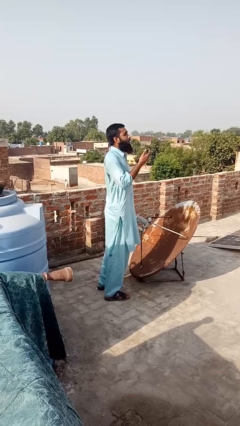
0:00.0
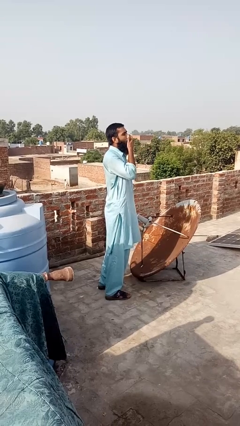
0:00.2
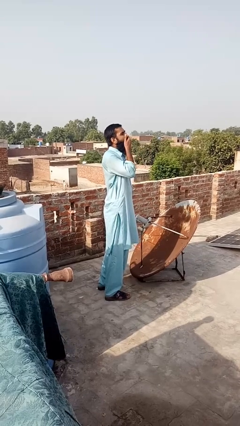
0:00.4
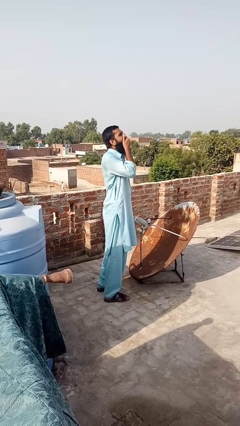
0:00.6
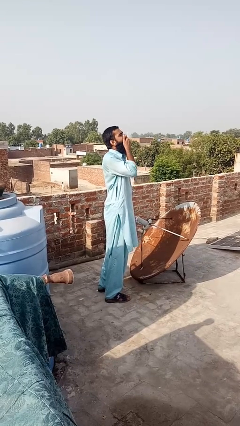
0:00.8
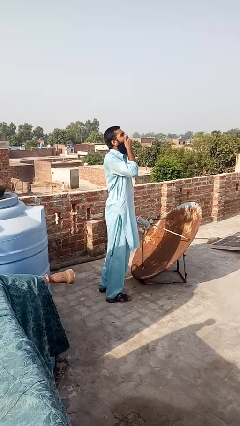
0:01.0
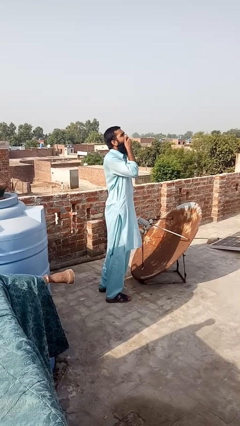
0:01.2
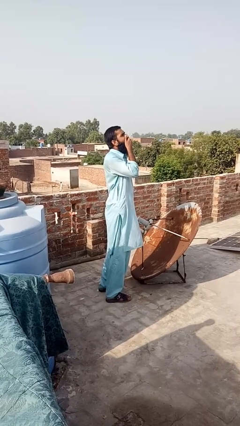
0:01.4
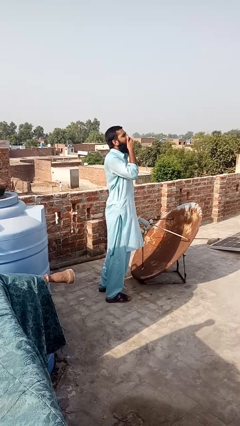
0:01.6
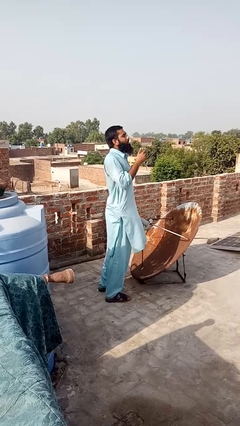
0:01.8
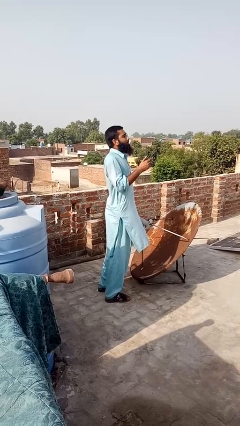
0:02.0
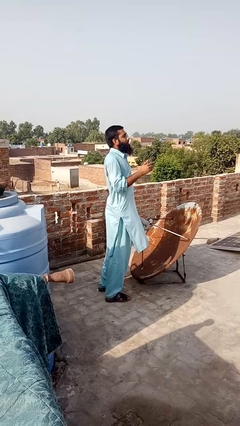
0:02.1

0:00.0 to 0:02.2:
person covers face with hands

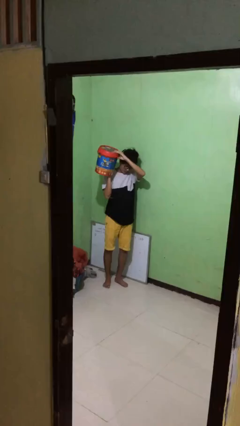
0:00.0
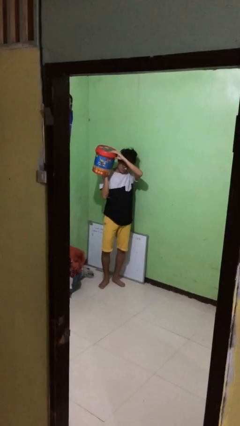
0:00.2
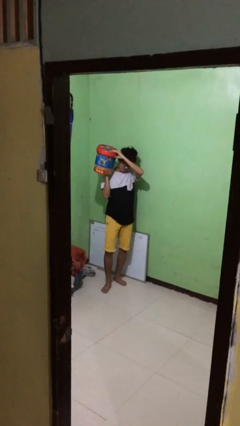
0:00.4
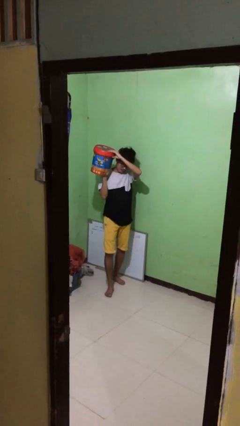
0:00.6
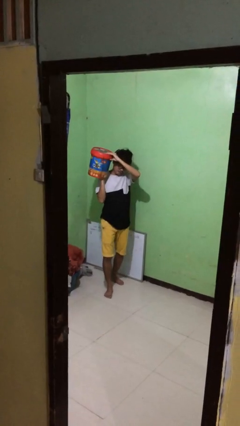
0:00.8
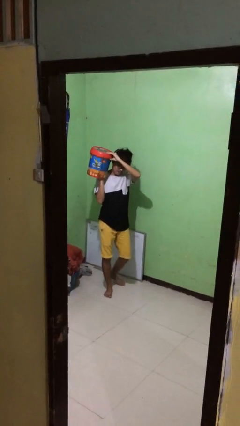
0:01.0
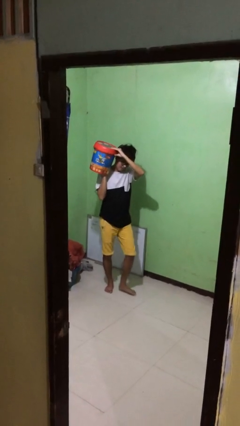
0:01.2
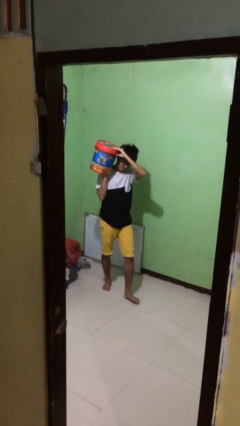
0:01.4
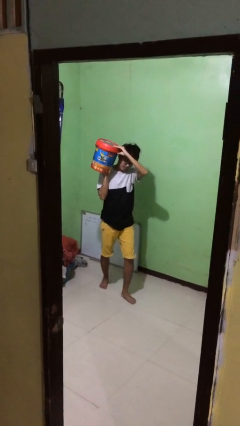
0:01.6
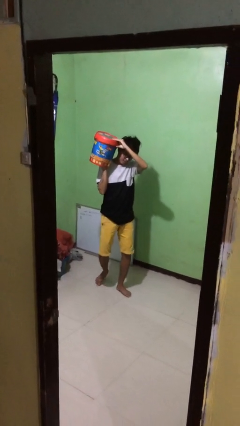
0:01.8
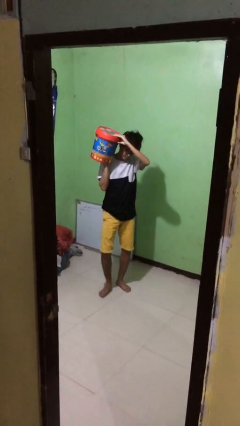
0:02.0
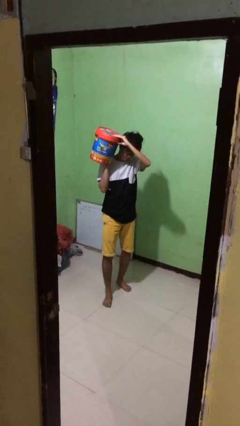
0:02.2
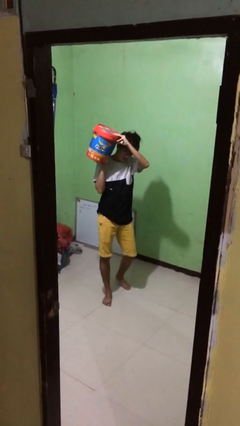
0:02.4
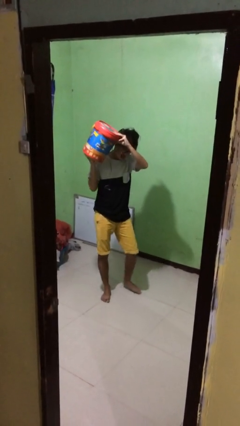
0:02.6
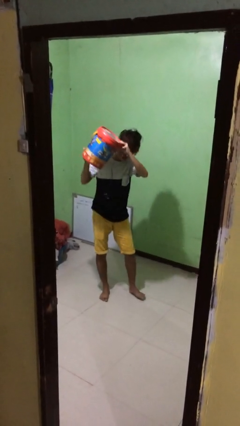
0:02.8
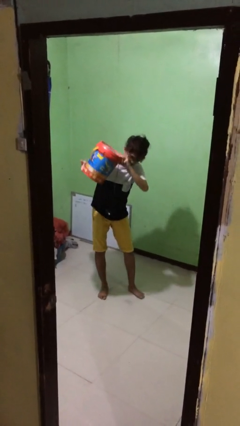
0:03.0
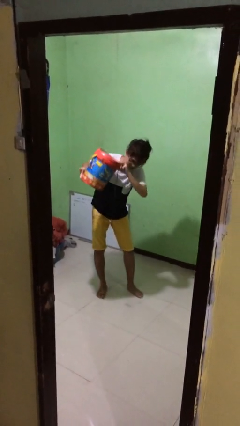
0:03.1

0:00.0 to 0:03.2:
person carries heavy object

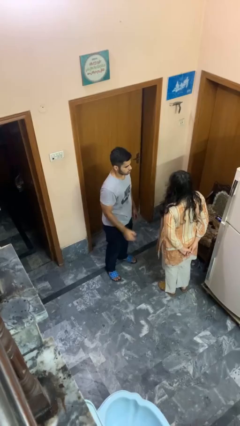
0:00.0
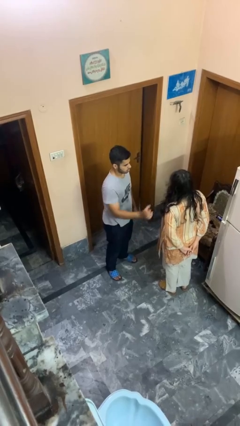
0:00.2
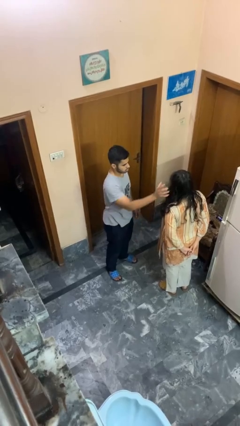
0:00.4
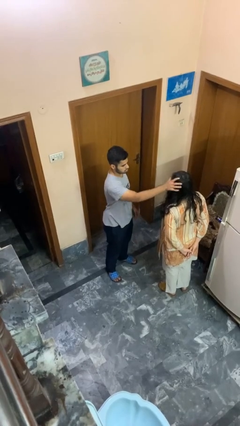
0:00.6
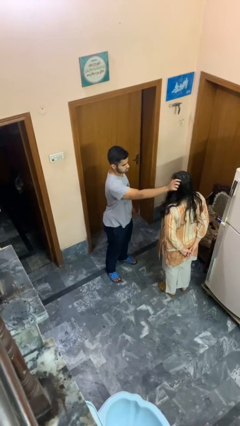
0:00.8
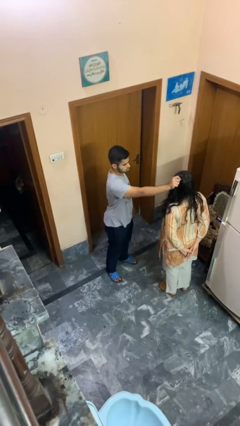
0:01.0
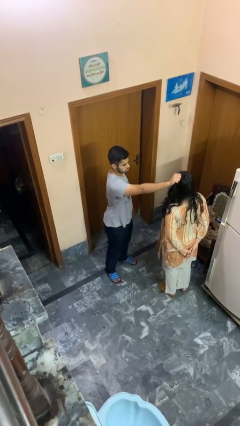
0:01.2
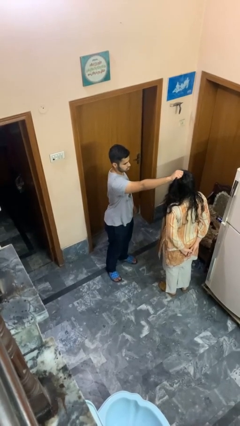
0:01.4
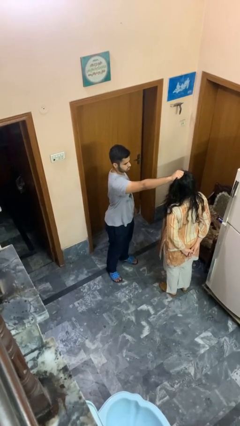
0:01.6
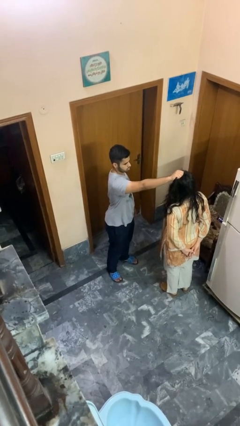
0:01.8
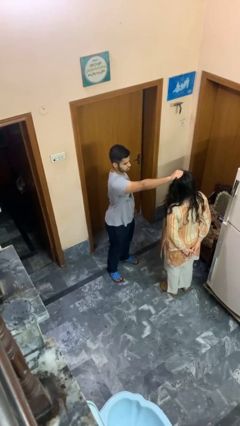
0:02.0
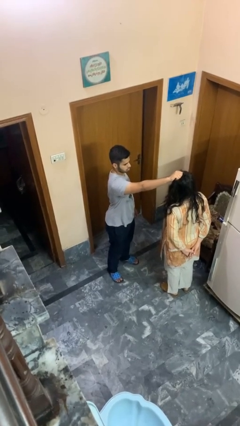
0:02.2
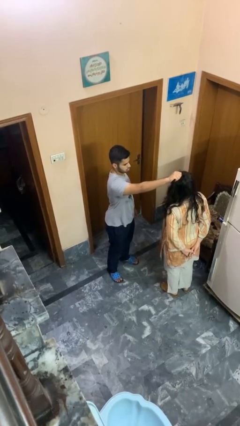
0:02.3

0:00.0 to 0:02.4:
person grabs person by hair

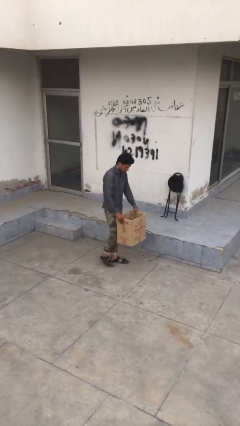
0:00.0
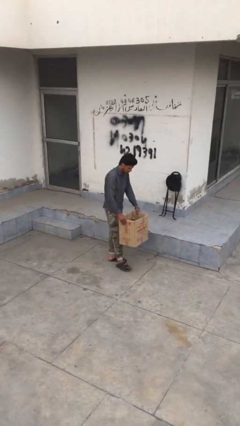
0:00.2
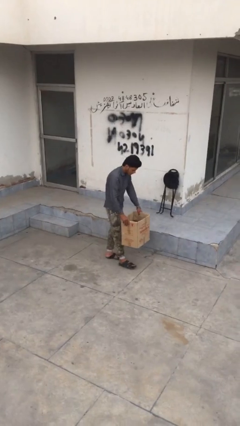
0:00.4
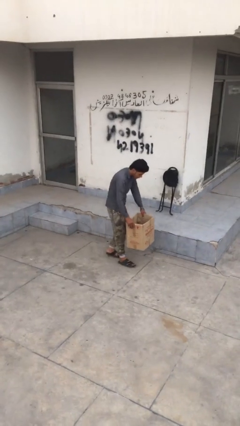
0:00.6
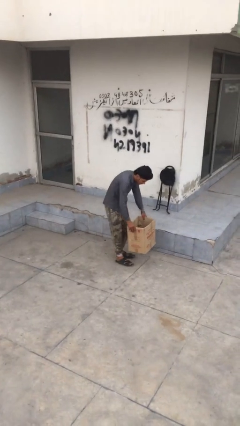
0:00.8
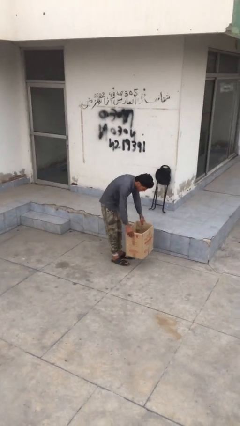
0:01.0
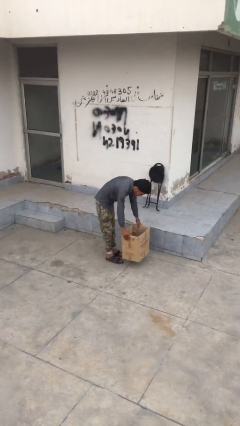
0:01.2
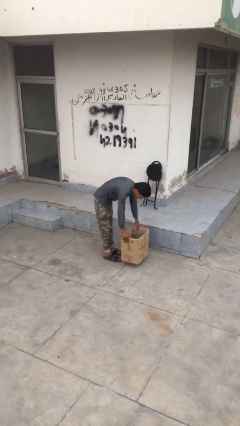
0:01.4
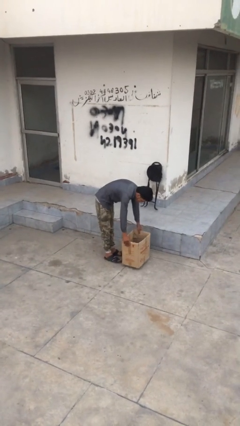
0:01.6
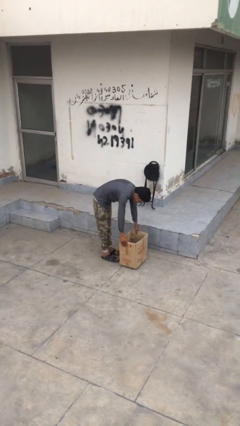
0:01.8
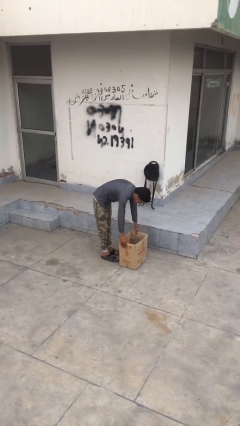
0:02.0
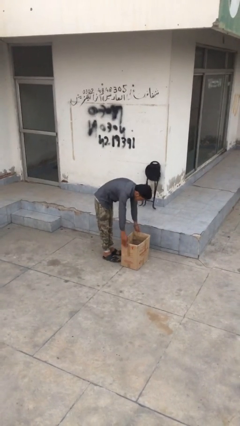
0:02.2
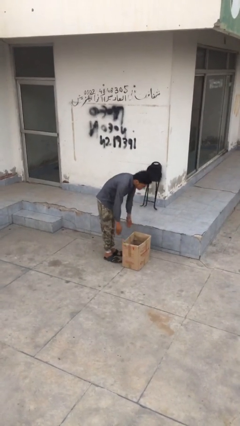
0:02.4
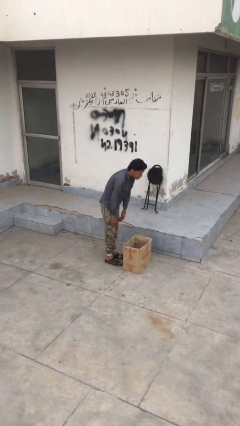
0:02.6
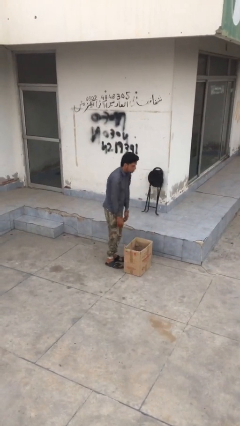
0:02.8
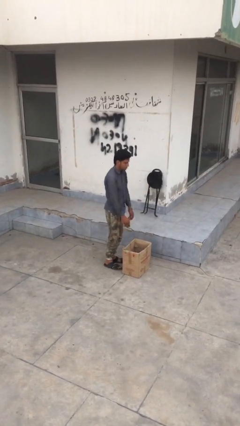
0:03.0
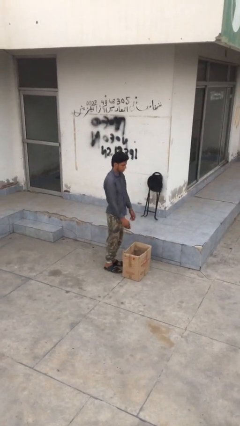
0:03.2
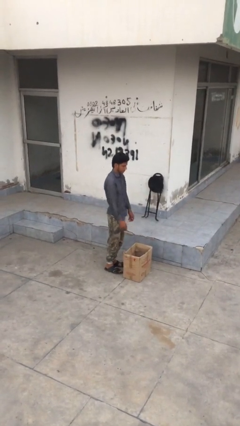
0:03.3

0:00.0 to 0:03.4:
person puts down object on floor

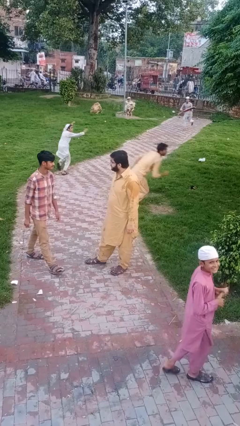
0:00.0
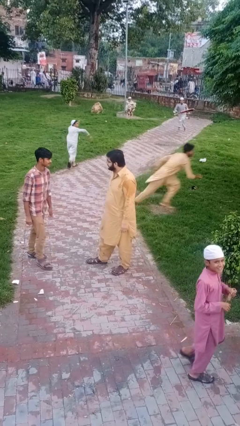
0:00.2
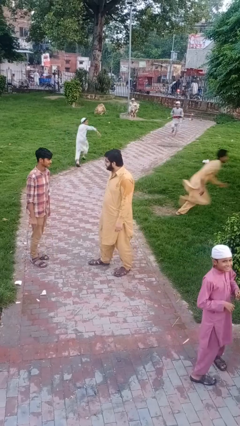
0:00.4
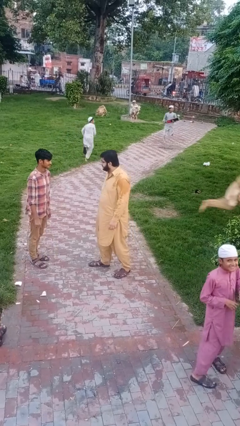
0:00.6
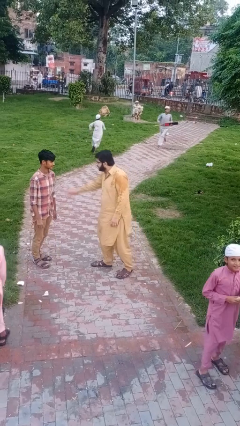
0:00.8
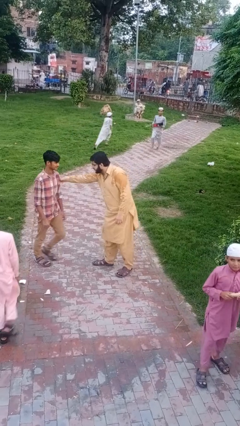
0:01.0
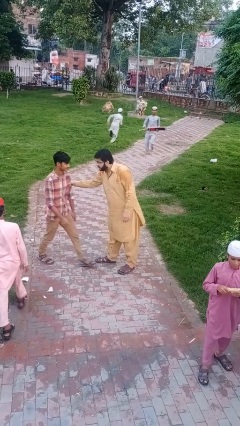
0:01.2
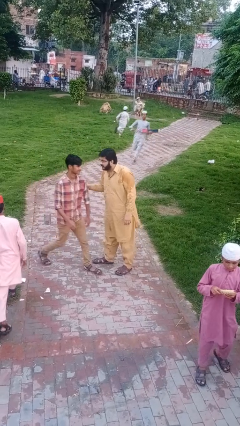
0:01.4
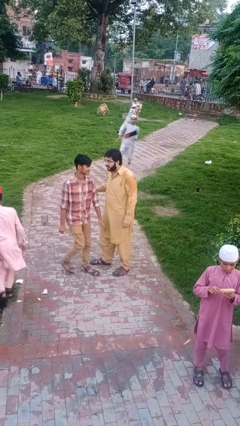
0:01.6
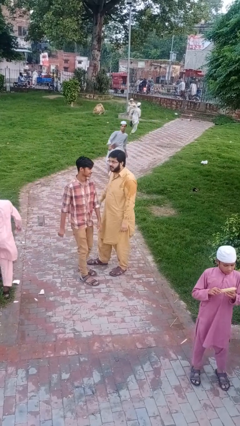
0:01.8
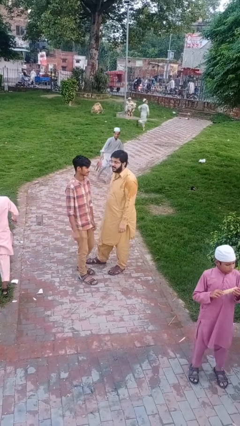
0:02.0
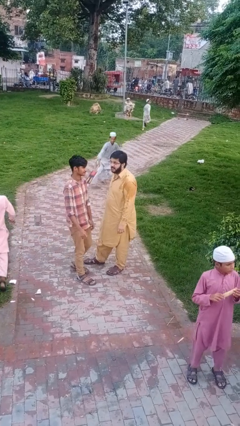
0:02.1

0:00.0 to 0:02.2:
person grabs person by bicep

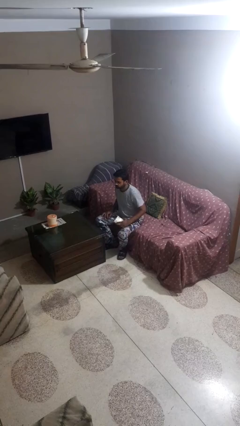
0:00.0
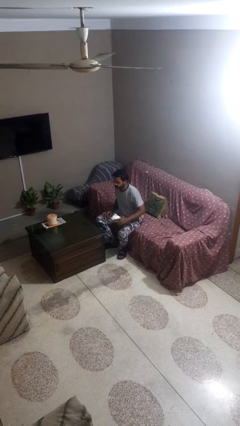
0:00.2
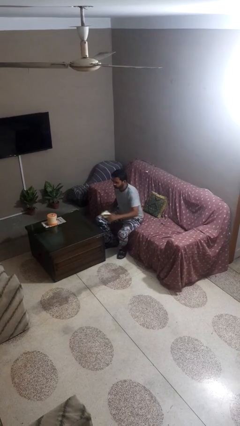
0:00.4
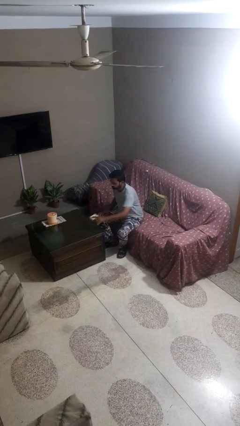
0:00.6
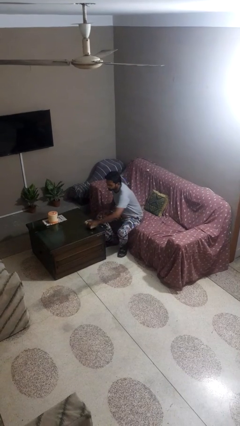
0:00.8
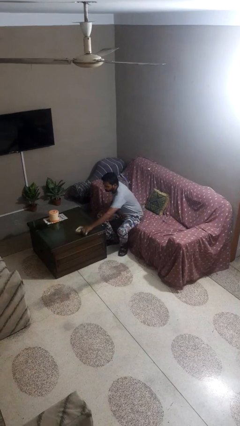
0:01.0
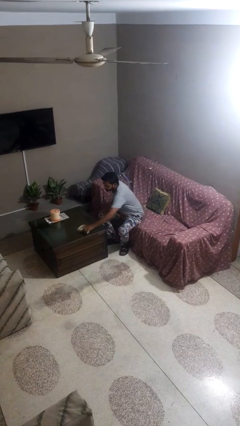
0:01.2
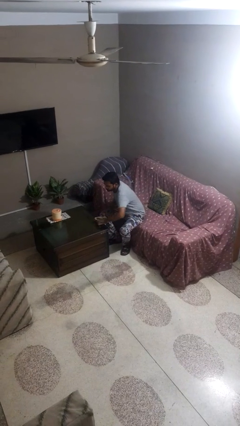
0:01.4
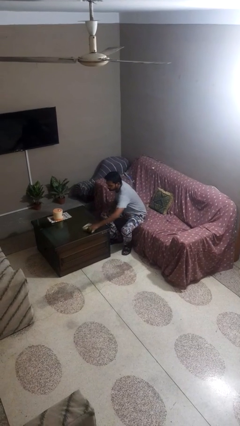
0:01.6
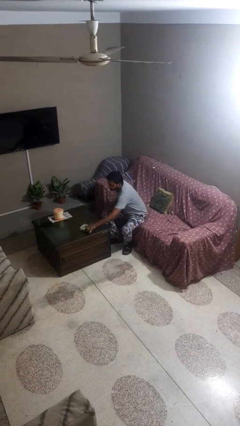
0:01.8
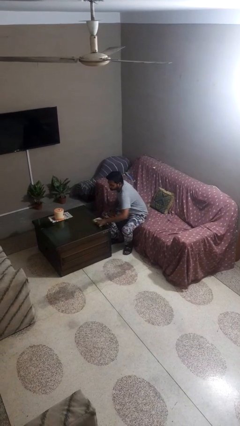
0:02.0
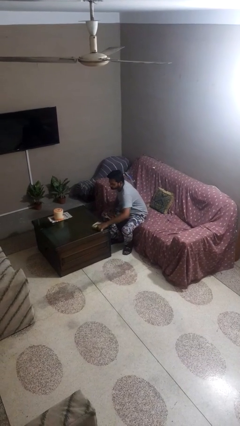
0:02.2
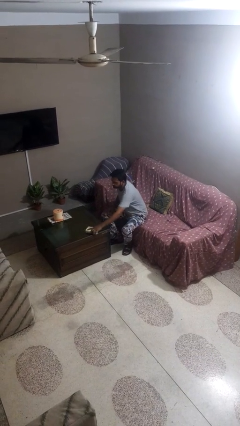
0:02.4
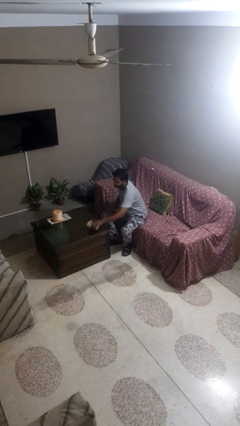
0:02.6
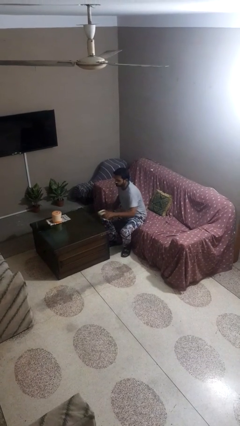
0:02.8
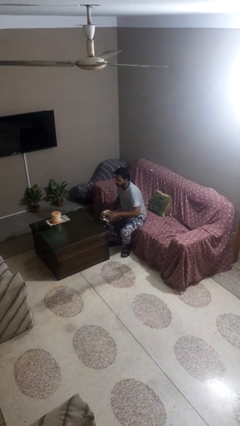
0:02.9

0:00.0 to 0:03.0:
person dusts furniture

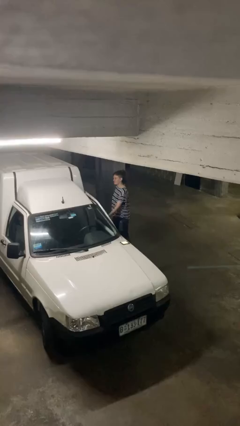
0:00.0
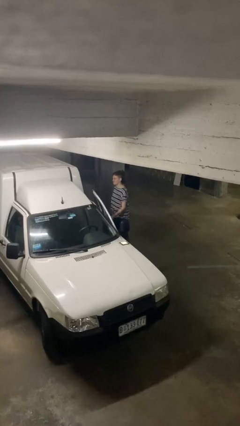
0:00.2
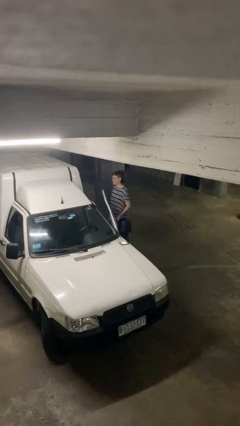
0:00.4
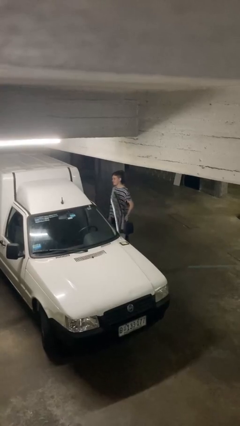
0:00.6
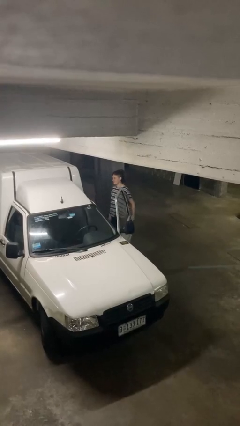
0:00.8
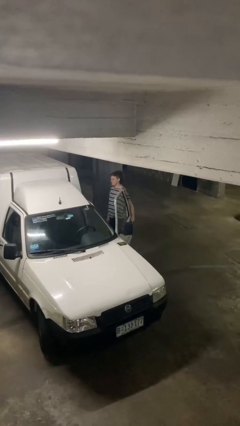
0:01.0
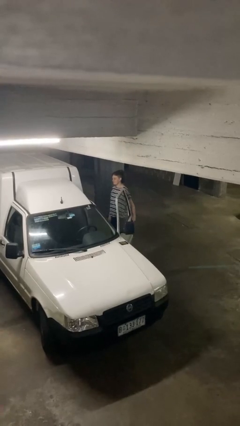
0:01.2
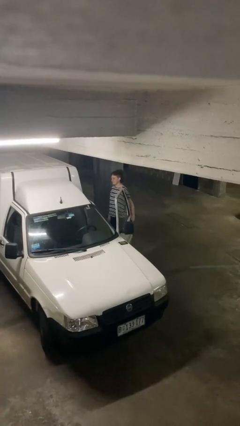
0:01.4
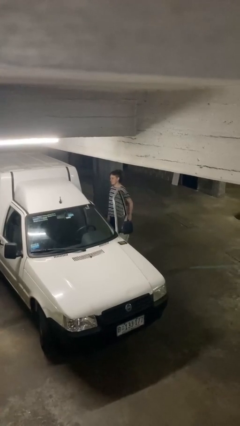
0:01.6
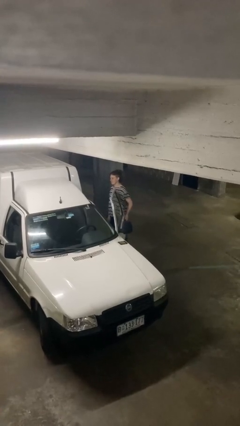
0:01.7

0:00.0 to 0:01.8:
person opens car door
